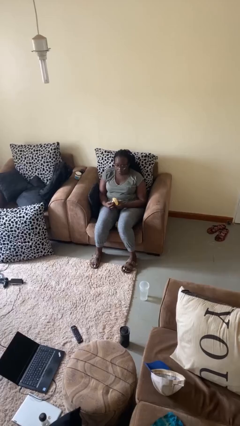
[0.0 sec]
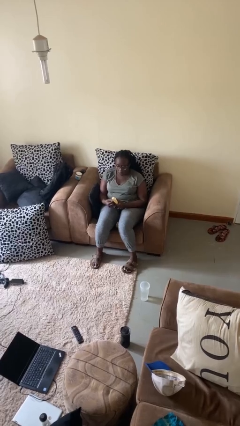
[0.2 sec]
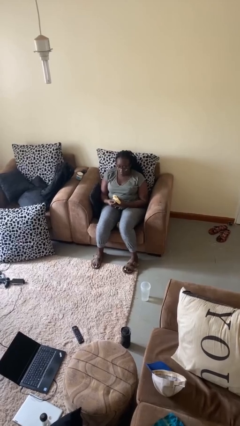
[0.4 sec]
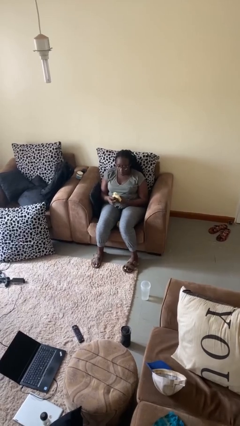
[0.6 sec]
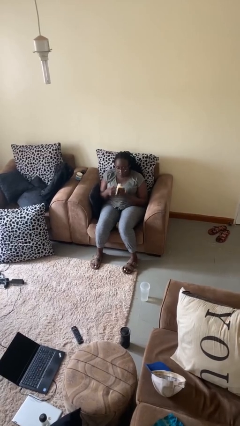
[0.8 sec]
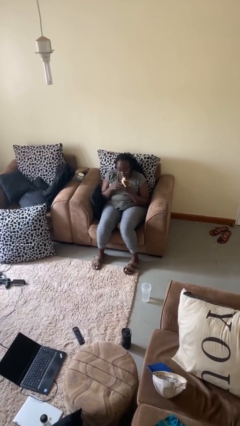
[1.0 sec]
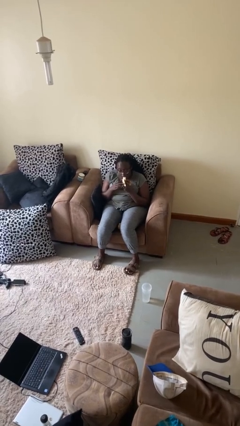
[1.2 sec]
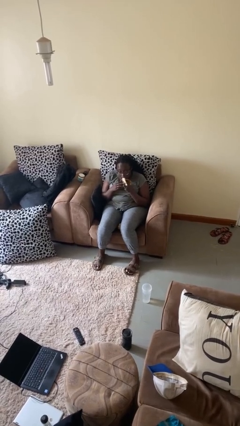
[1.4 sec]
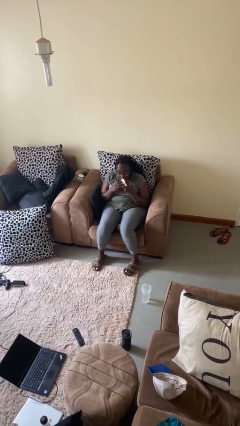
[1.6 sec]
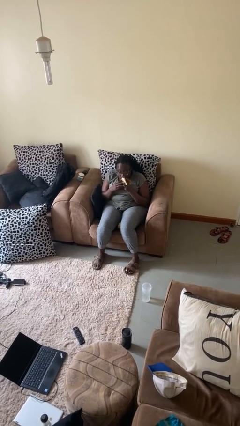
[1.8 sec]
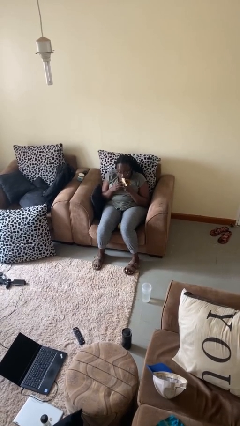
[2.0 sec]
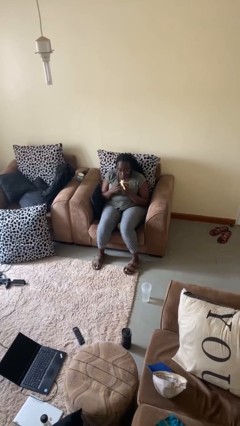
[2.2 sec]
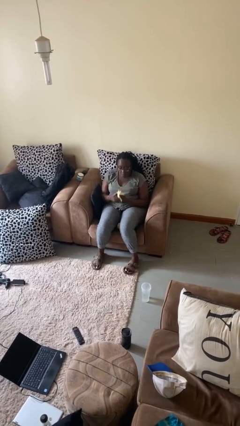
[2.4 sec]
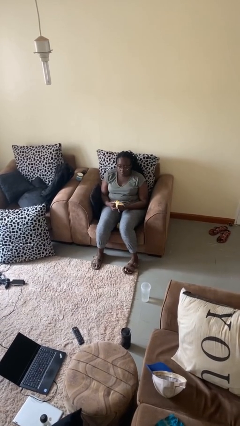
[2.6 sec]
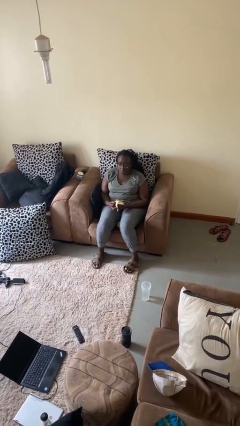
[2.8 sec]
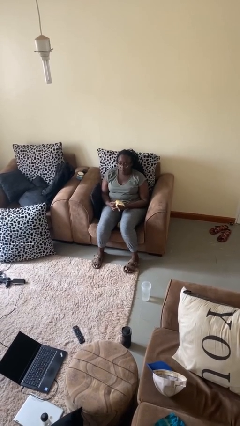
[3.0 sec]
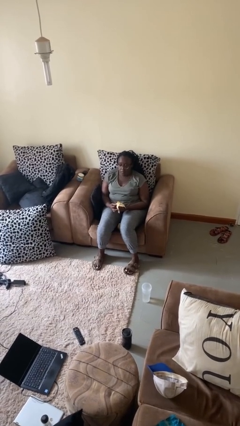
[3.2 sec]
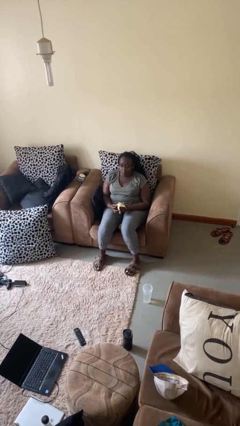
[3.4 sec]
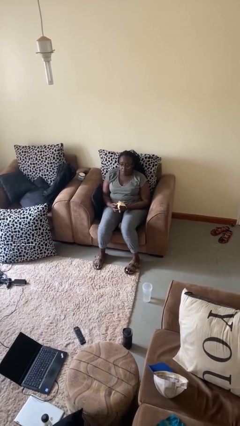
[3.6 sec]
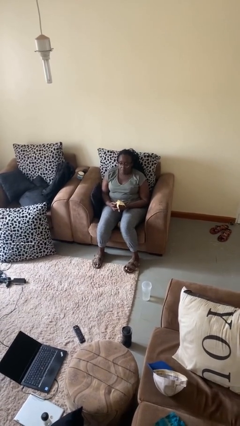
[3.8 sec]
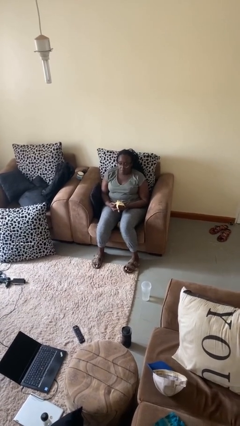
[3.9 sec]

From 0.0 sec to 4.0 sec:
person eats banana

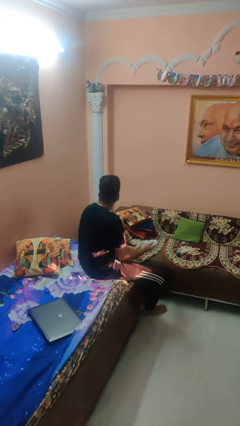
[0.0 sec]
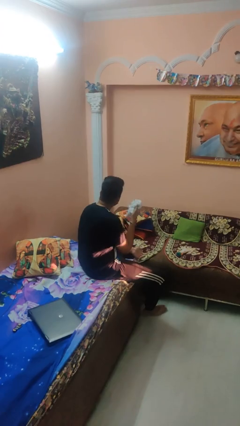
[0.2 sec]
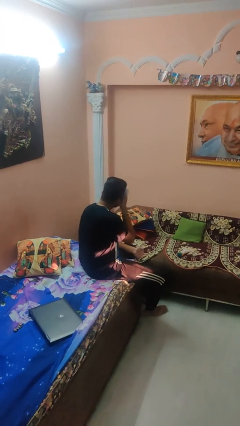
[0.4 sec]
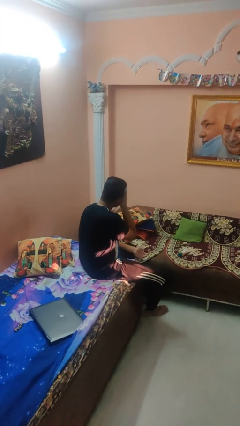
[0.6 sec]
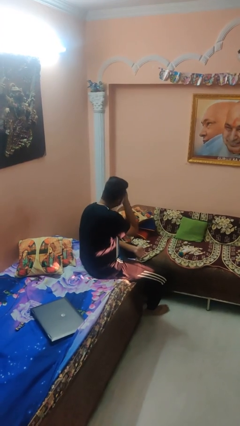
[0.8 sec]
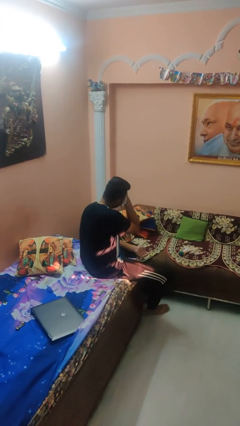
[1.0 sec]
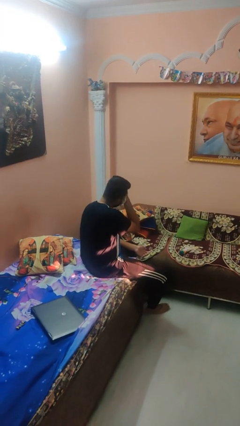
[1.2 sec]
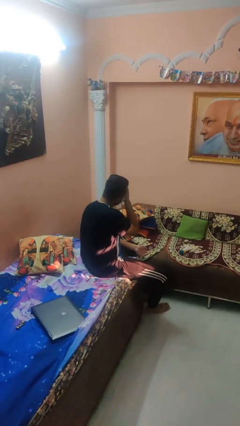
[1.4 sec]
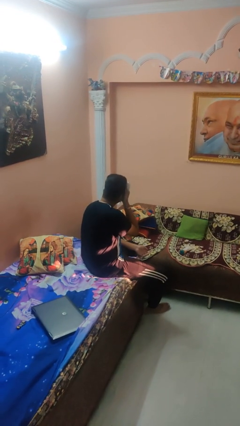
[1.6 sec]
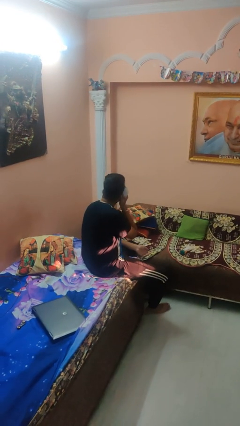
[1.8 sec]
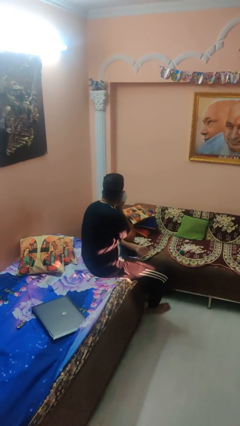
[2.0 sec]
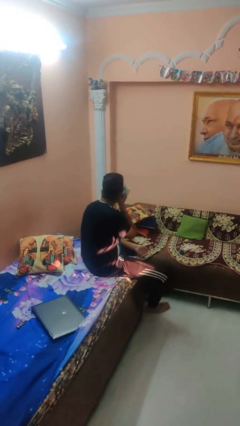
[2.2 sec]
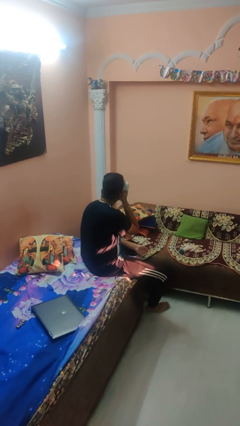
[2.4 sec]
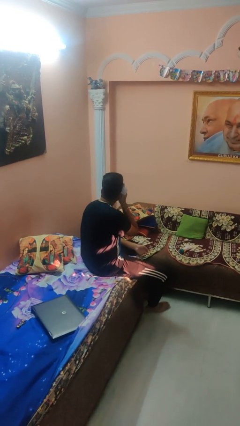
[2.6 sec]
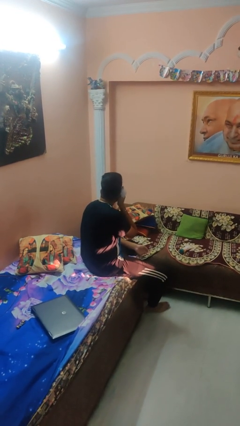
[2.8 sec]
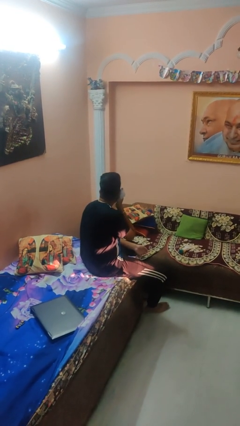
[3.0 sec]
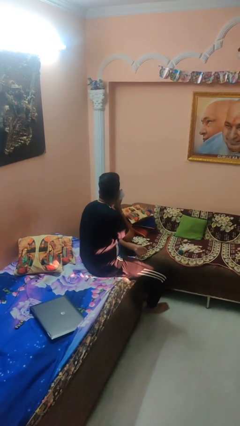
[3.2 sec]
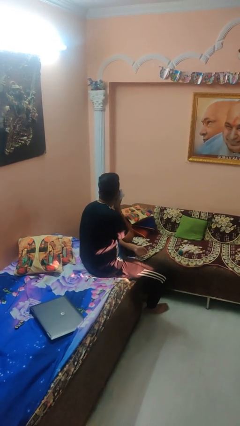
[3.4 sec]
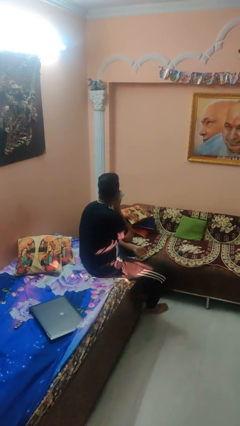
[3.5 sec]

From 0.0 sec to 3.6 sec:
person wipes mouth with napkin

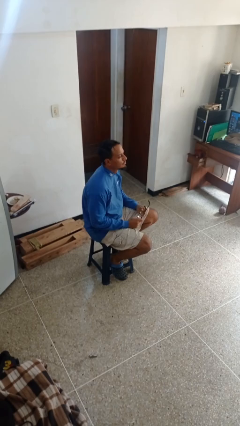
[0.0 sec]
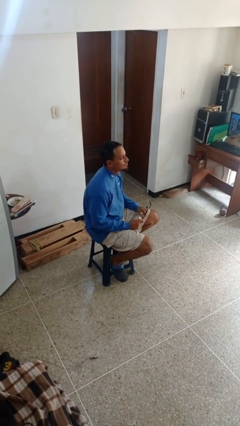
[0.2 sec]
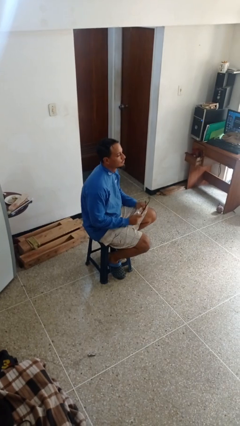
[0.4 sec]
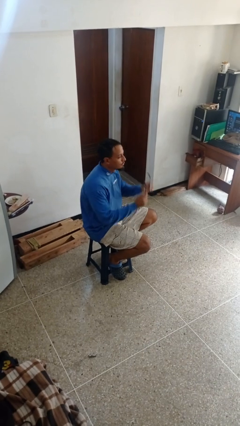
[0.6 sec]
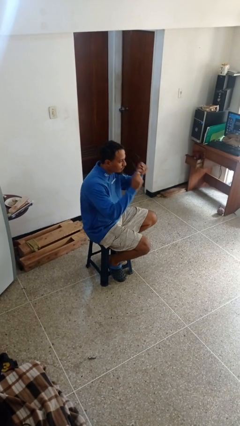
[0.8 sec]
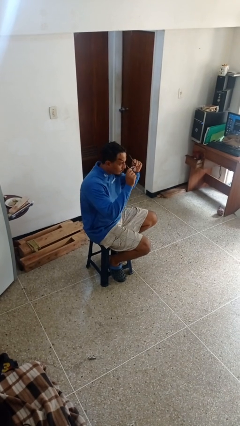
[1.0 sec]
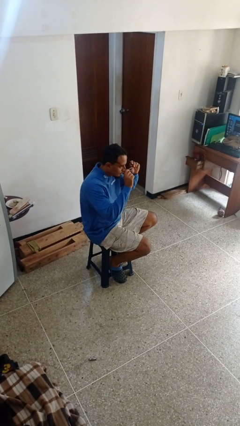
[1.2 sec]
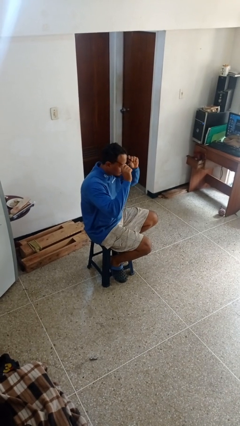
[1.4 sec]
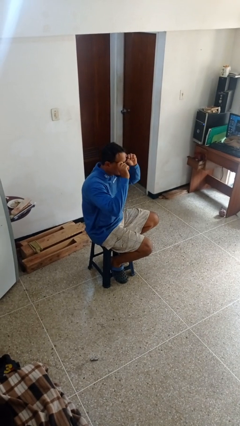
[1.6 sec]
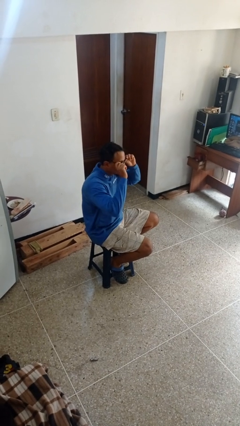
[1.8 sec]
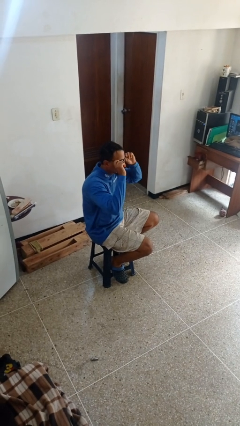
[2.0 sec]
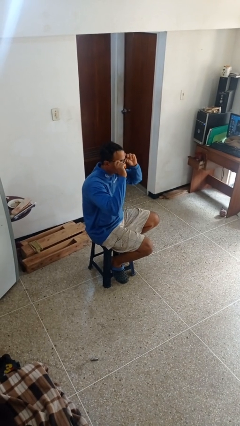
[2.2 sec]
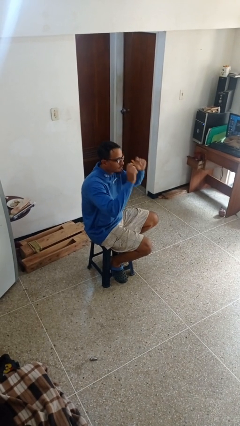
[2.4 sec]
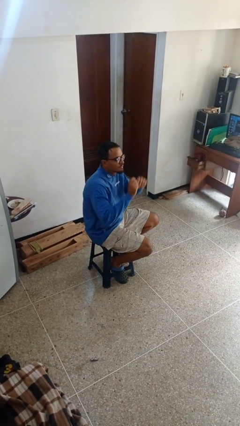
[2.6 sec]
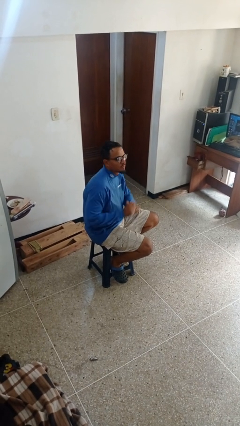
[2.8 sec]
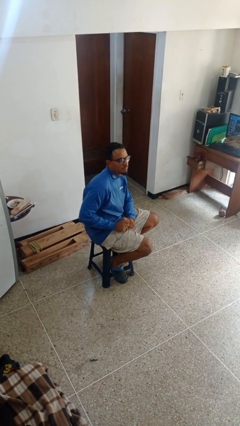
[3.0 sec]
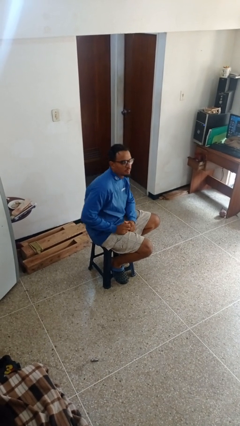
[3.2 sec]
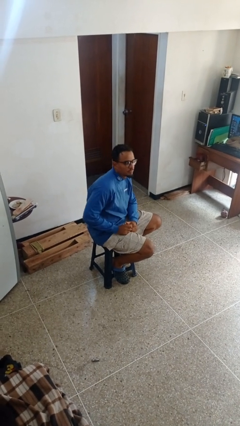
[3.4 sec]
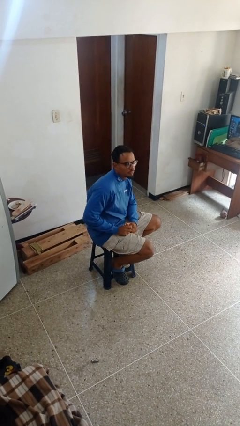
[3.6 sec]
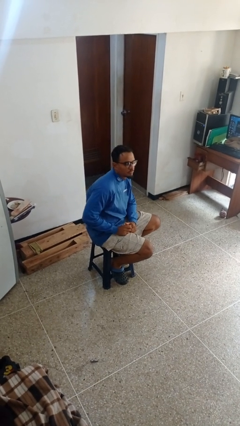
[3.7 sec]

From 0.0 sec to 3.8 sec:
person puts on glasses

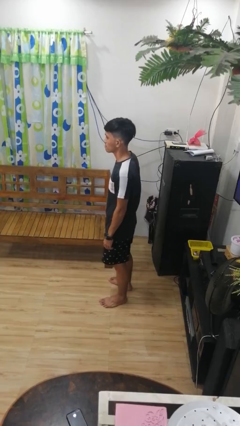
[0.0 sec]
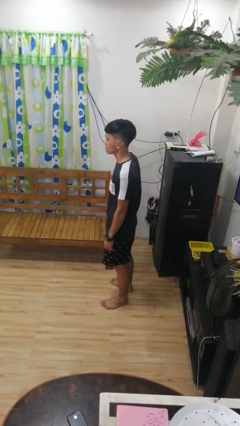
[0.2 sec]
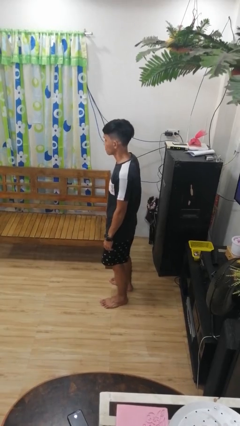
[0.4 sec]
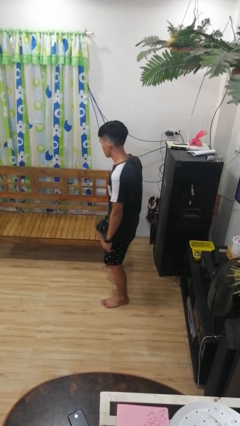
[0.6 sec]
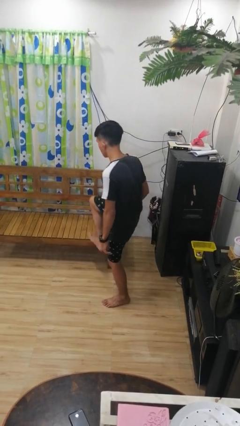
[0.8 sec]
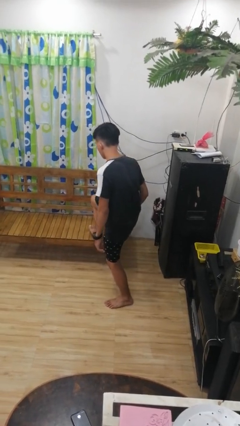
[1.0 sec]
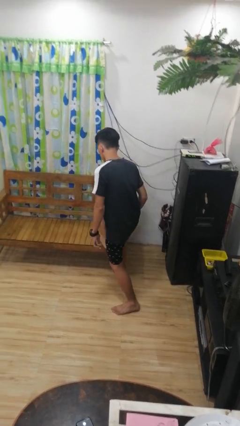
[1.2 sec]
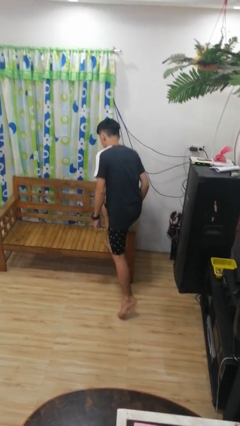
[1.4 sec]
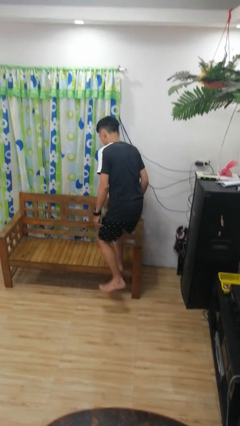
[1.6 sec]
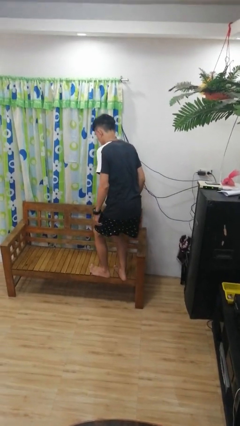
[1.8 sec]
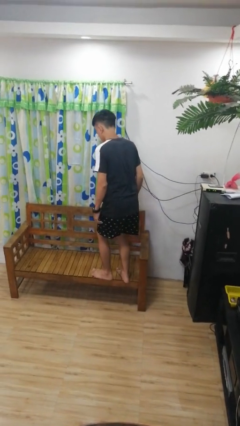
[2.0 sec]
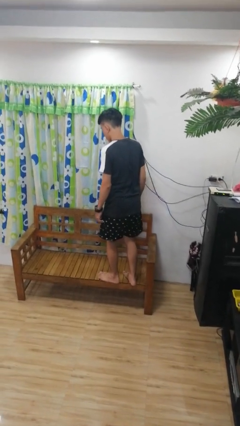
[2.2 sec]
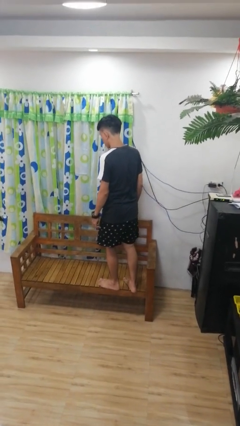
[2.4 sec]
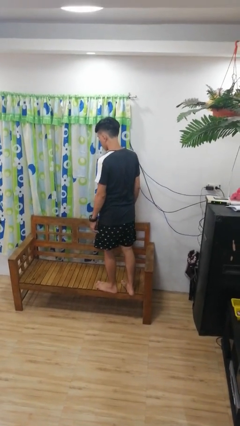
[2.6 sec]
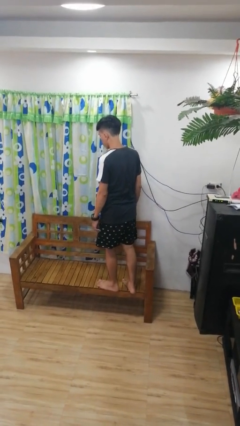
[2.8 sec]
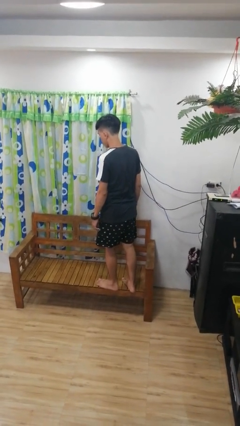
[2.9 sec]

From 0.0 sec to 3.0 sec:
person climbs on couch

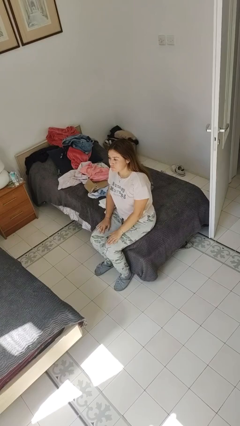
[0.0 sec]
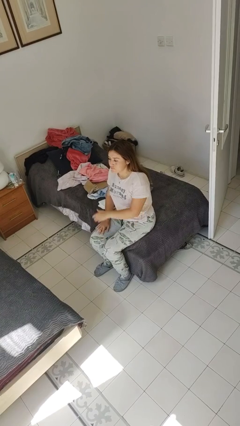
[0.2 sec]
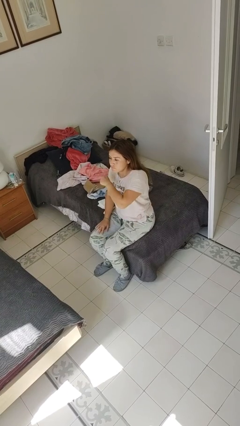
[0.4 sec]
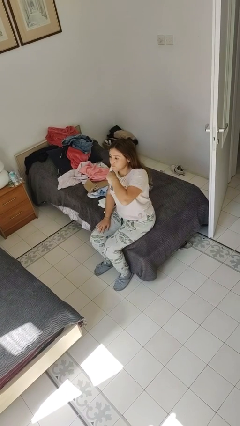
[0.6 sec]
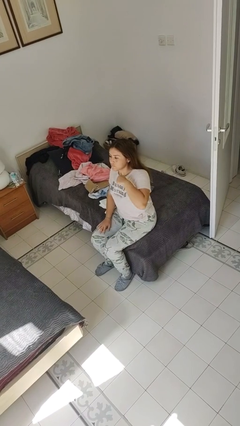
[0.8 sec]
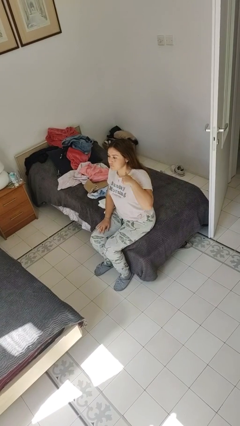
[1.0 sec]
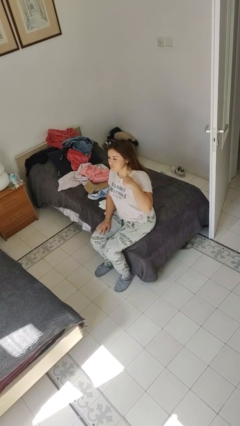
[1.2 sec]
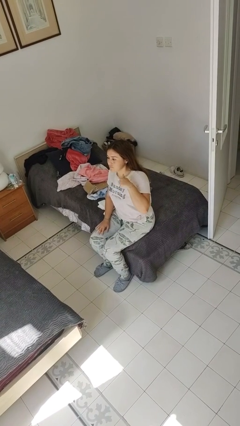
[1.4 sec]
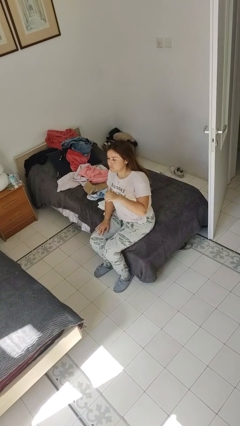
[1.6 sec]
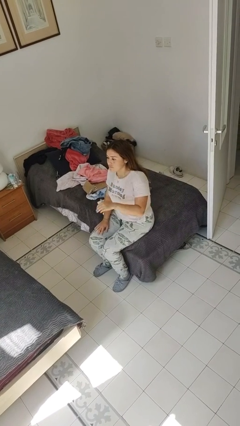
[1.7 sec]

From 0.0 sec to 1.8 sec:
person gestures cut

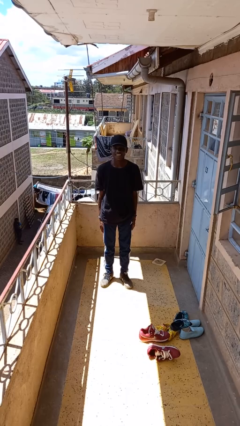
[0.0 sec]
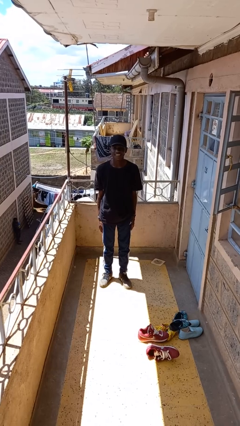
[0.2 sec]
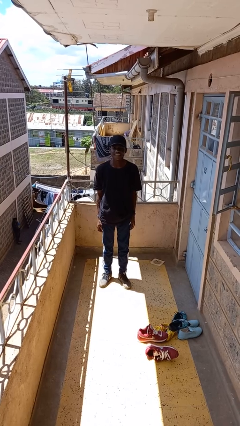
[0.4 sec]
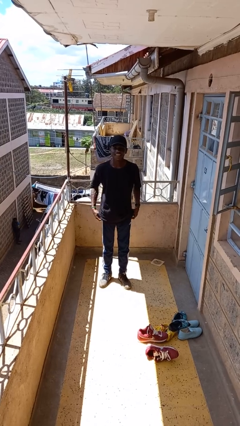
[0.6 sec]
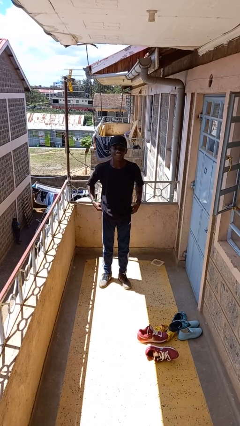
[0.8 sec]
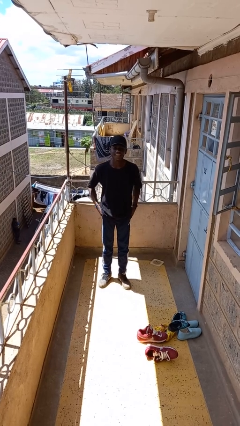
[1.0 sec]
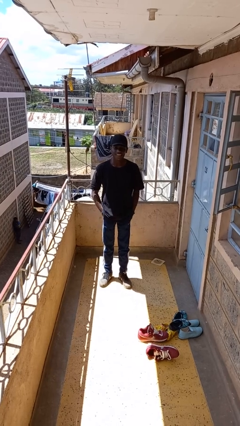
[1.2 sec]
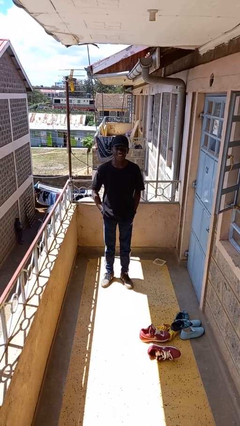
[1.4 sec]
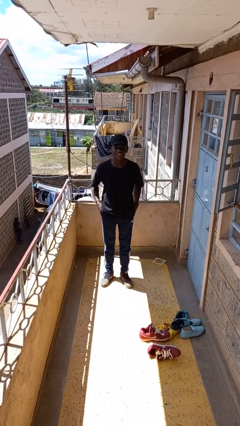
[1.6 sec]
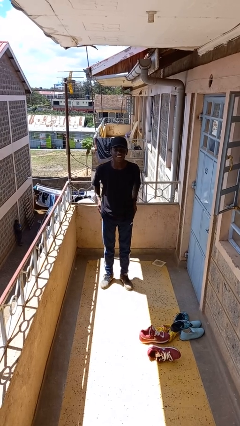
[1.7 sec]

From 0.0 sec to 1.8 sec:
person puts hands in back pockets
